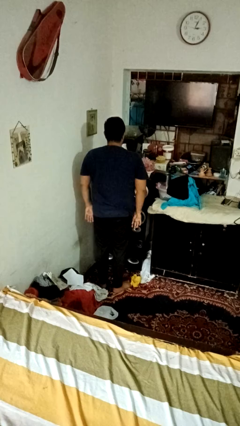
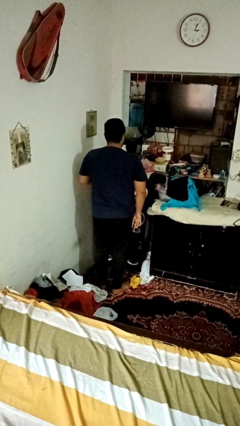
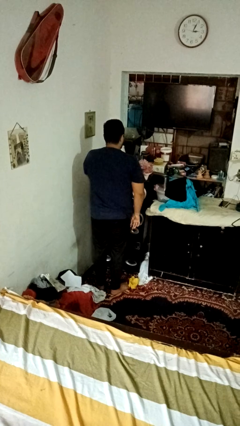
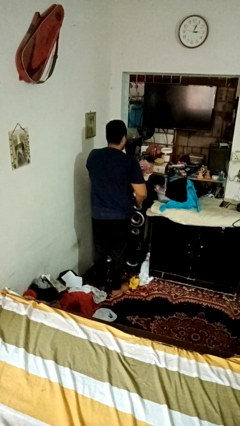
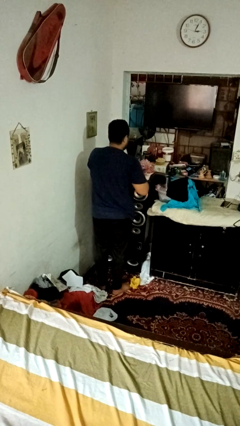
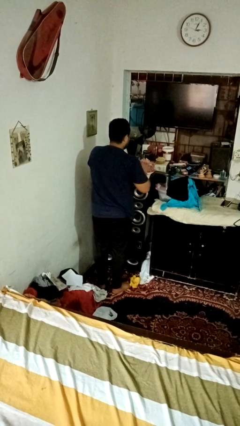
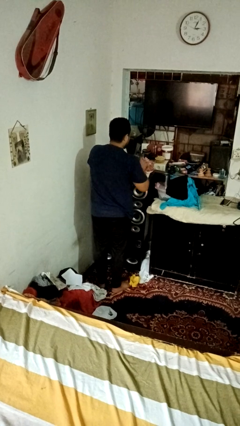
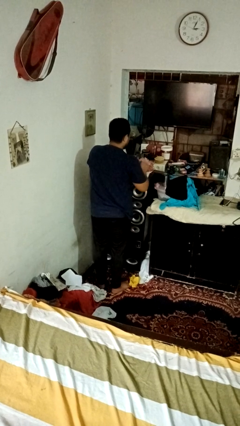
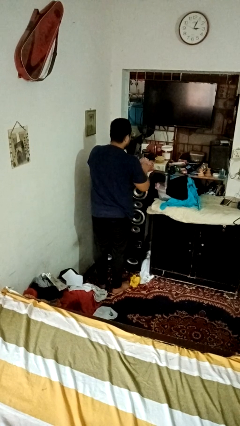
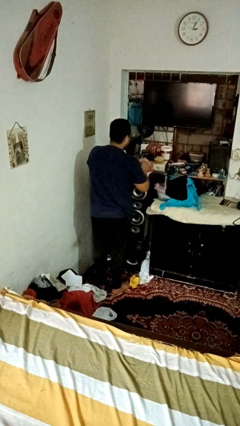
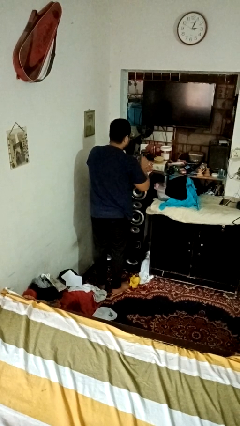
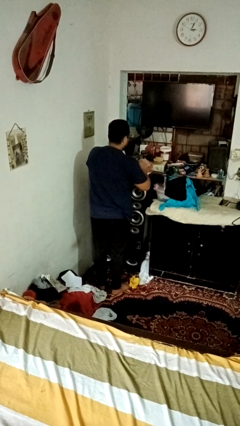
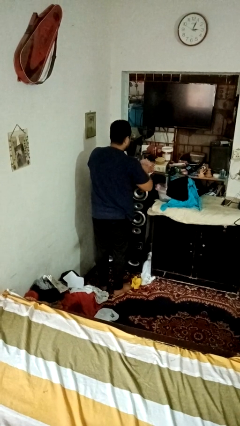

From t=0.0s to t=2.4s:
person arranges flowers in vase

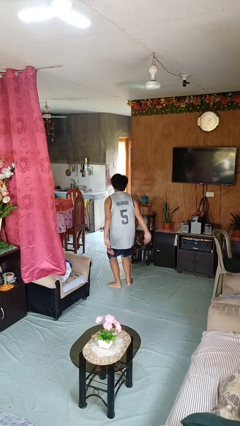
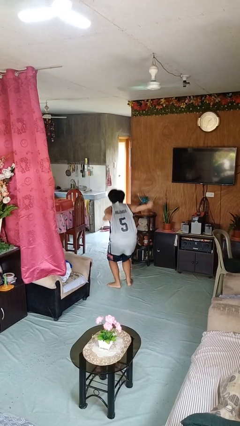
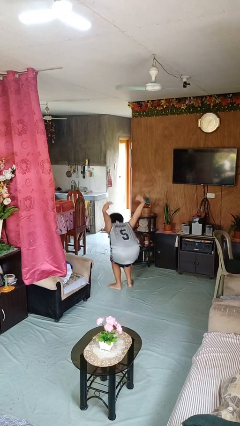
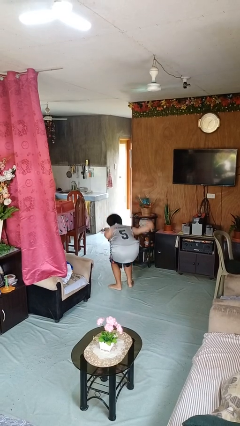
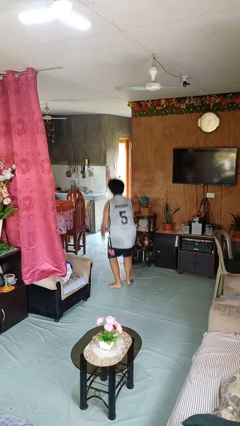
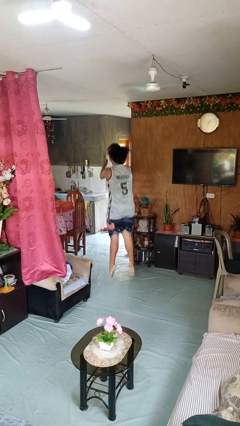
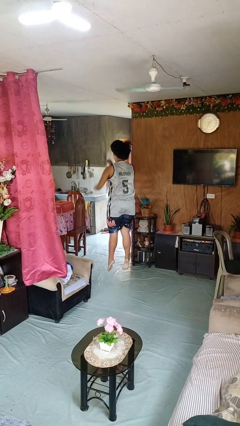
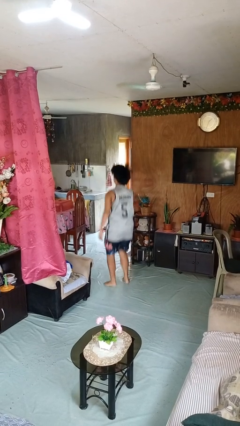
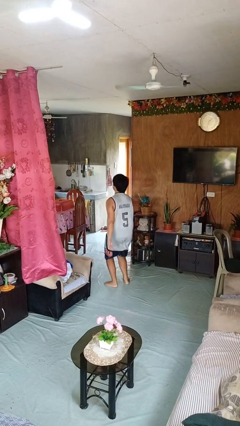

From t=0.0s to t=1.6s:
person jumps

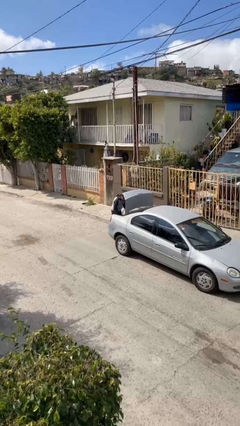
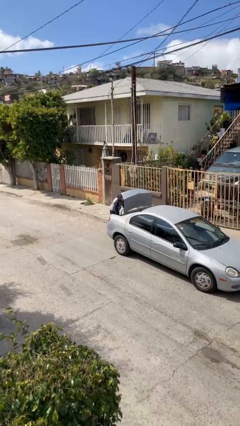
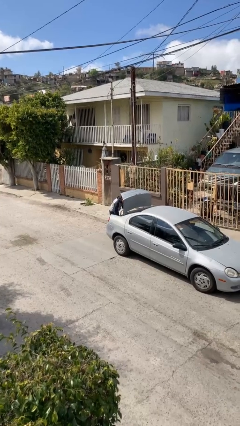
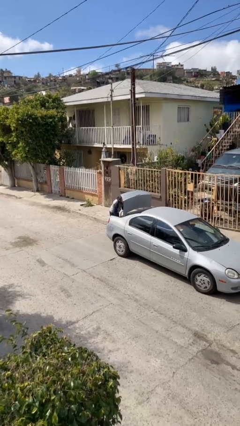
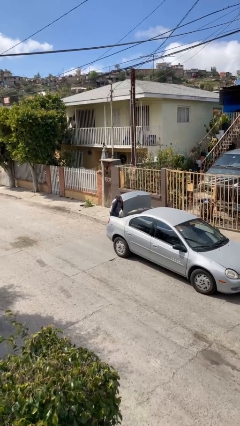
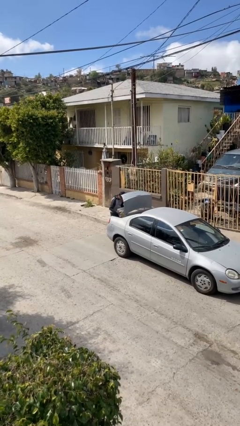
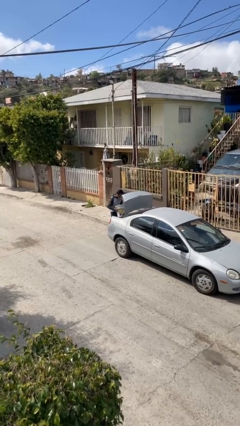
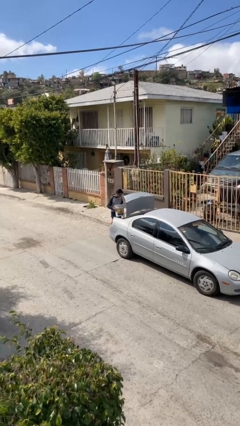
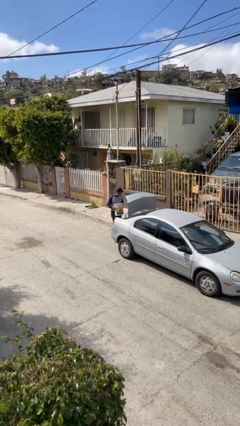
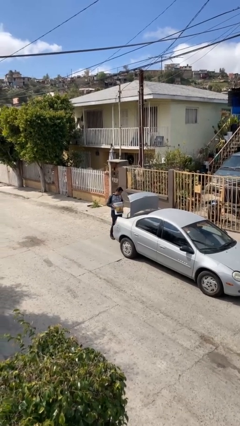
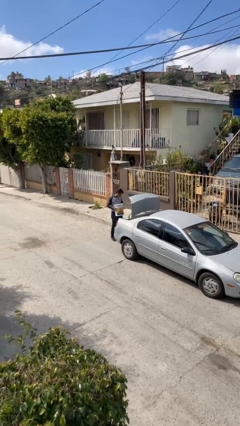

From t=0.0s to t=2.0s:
person unloads car

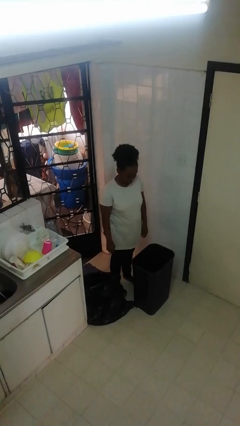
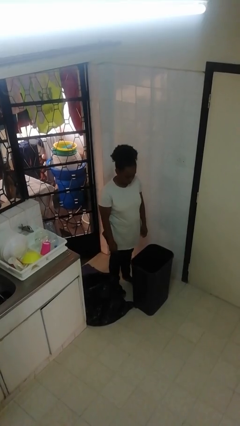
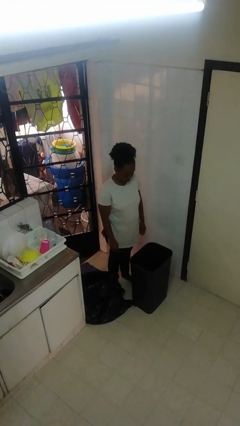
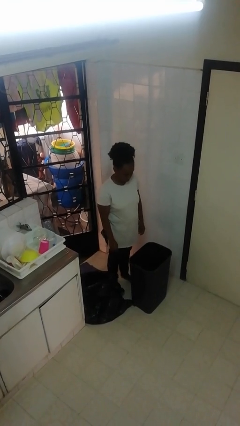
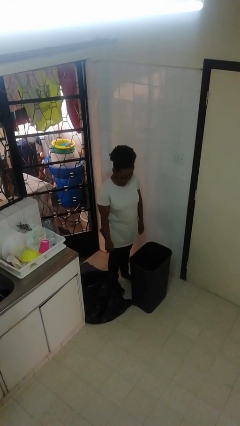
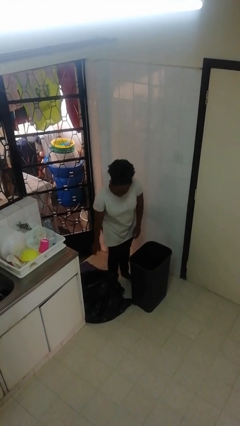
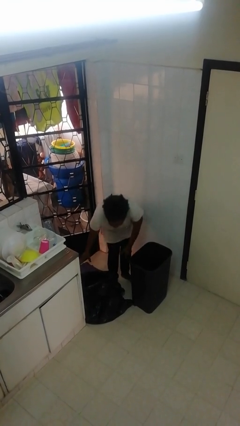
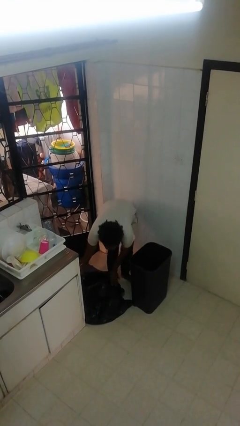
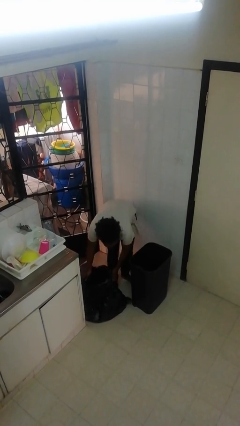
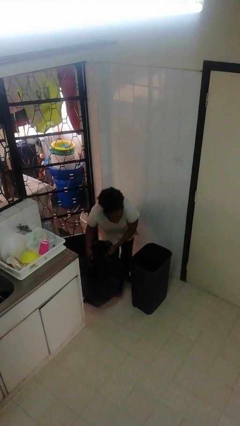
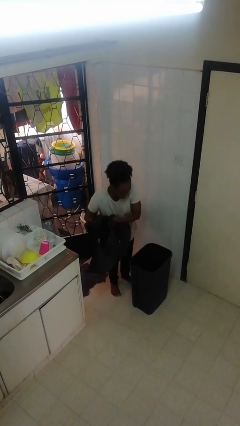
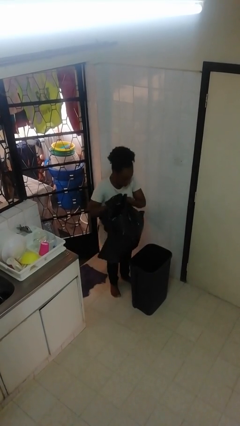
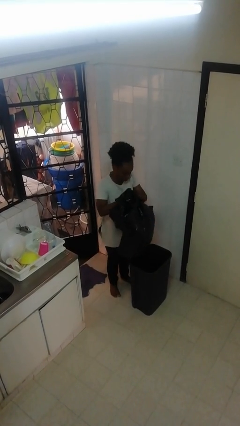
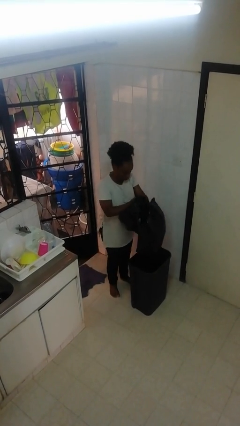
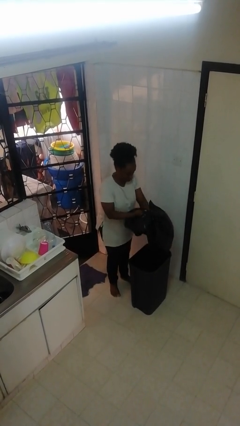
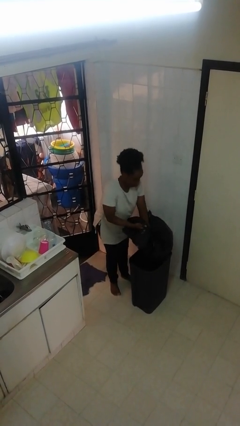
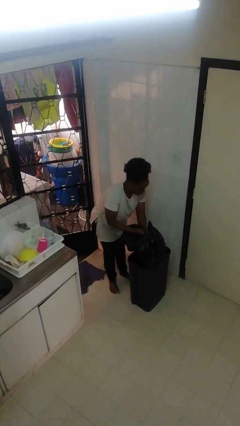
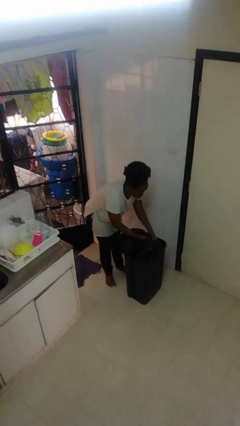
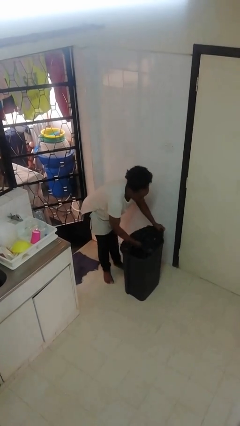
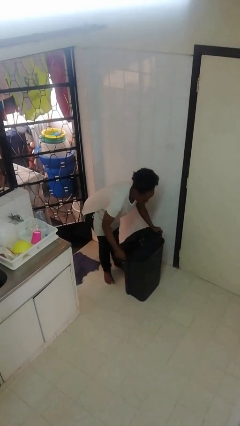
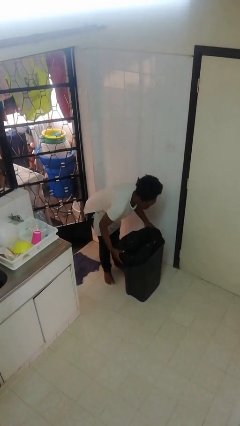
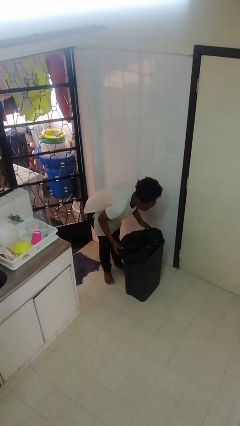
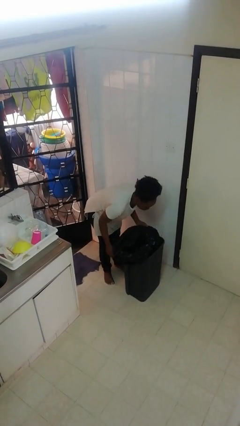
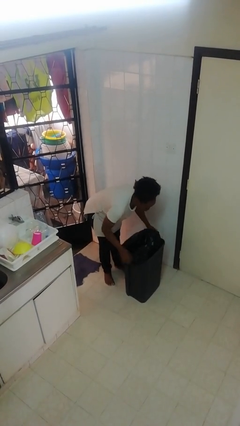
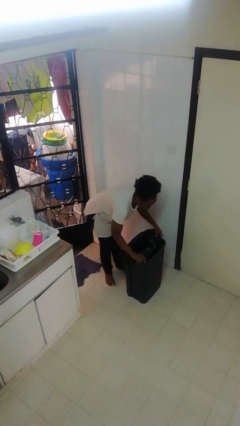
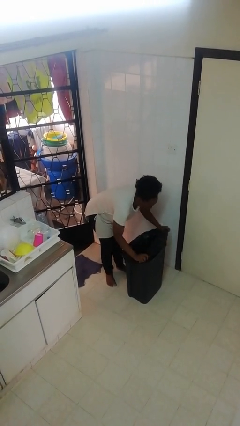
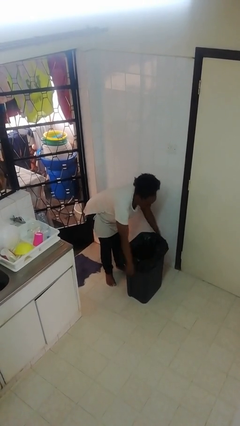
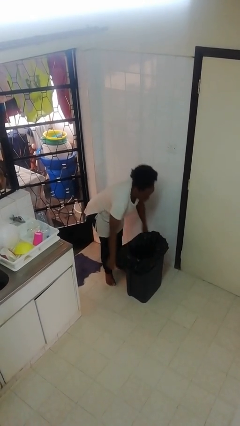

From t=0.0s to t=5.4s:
person inserts trashbag into trashcan

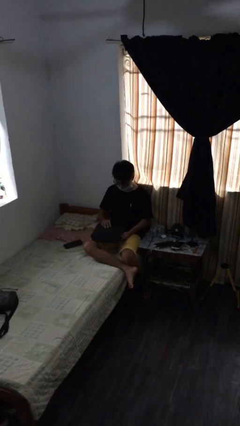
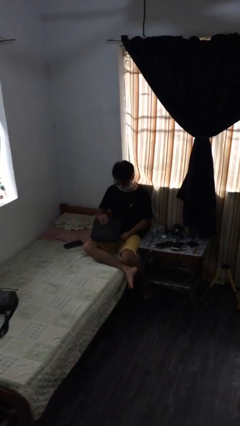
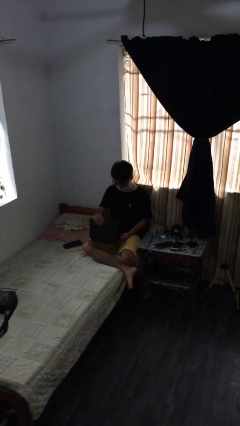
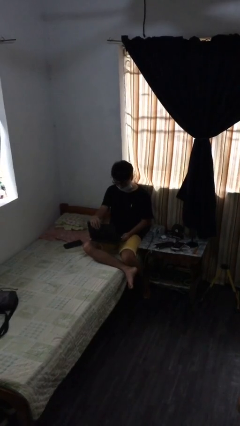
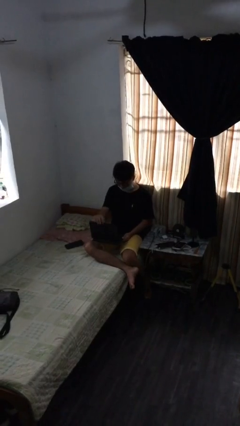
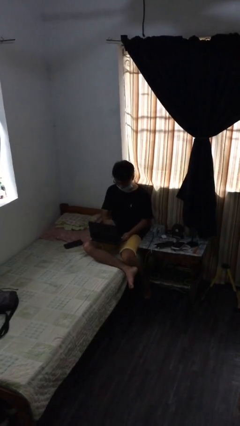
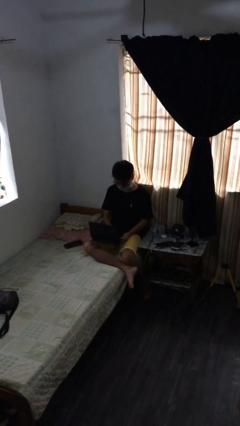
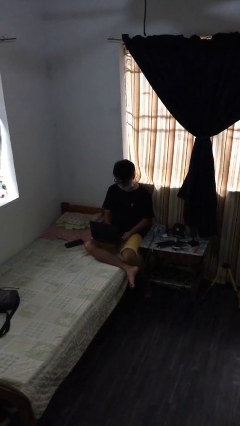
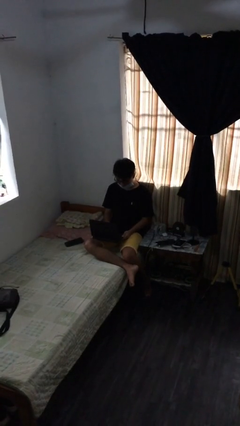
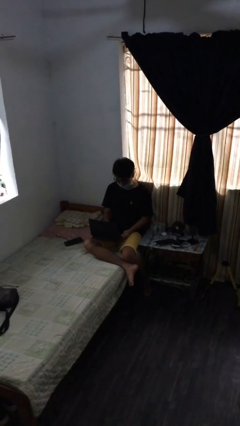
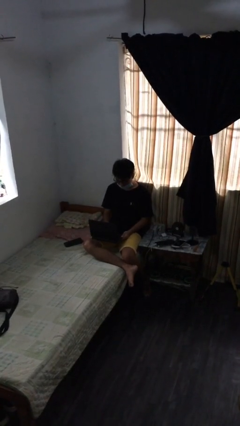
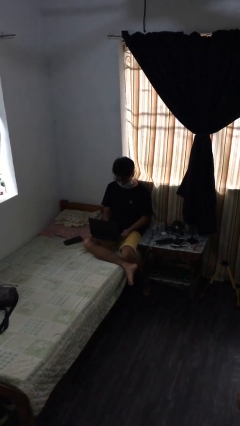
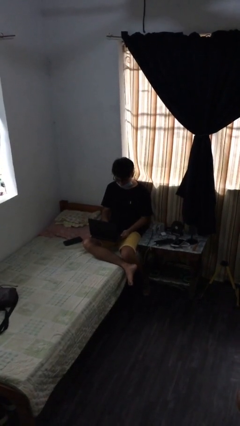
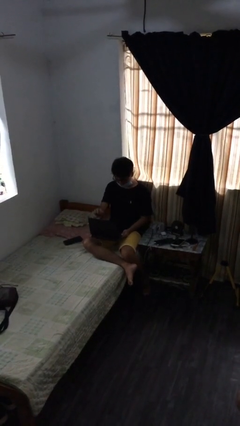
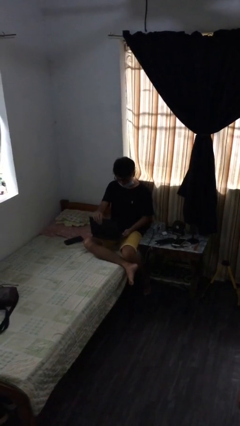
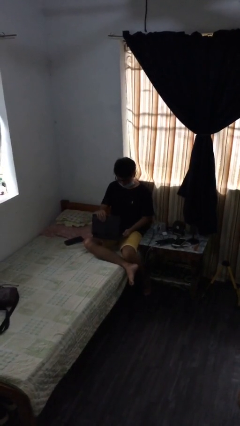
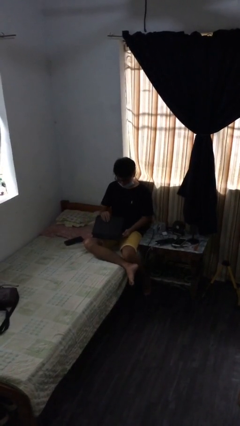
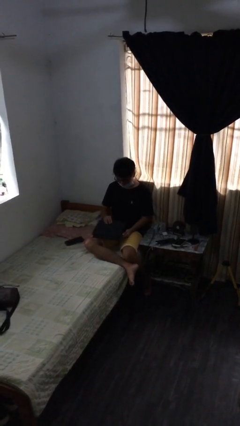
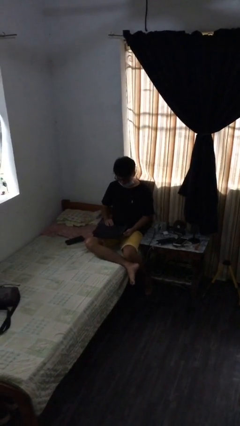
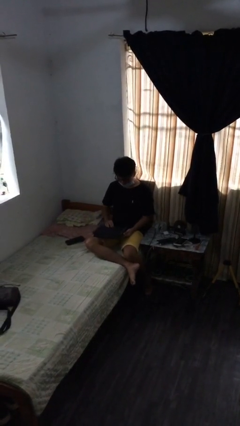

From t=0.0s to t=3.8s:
person interacts with laptop

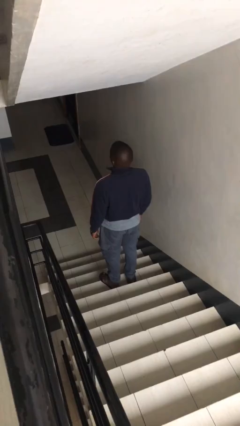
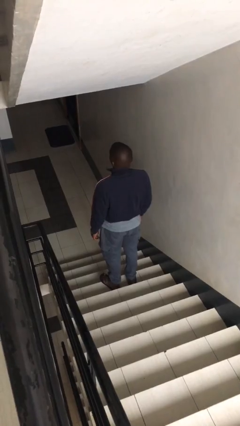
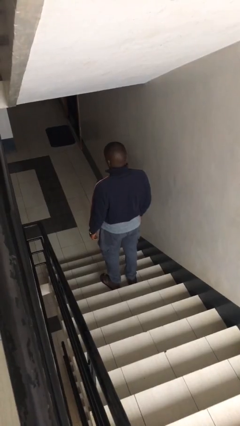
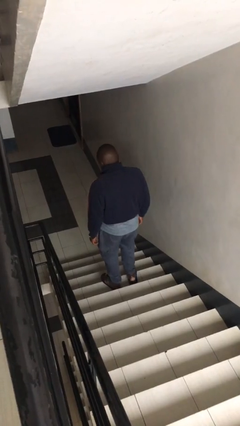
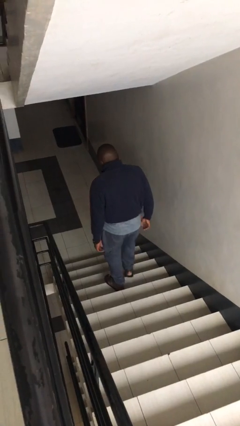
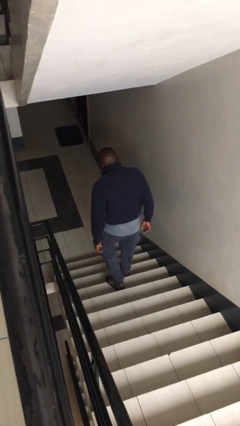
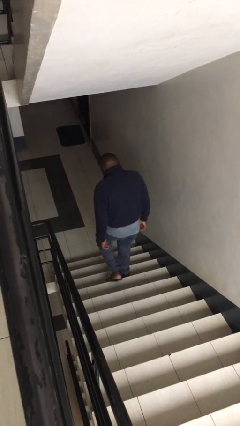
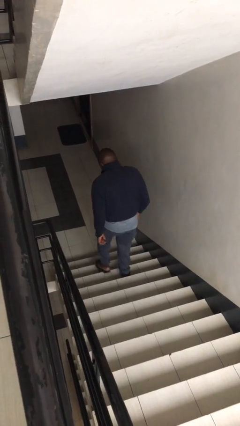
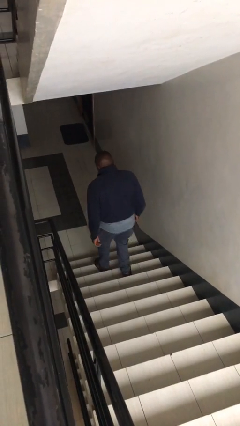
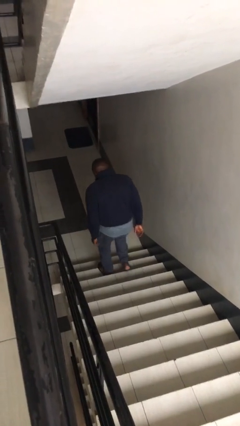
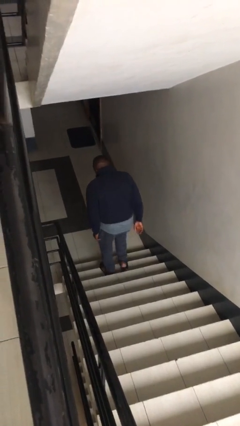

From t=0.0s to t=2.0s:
person climbs down stairs

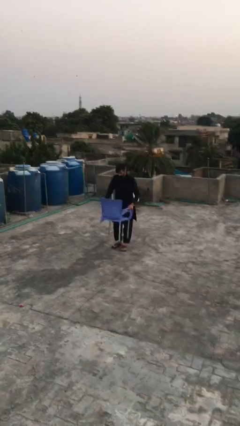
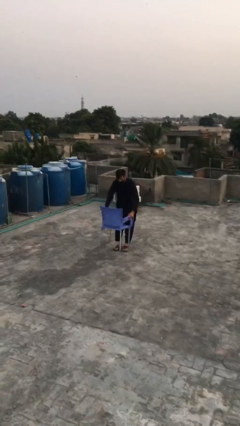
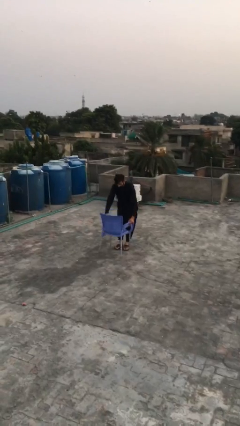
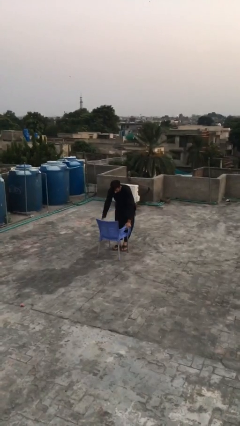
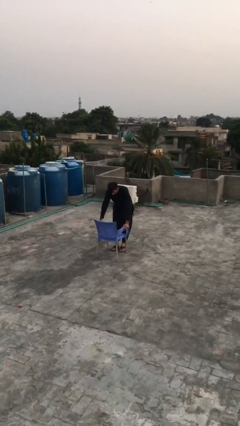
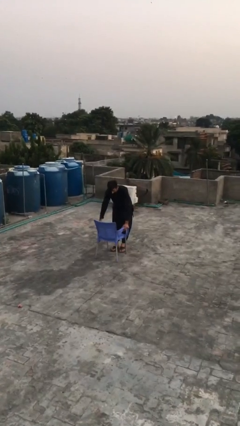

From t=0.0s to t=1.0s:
person puts down object on floor
